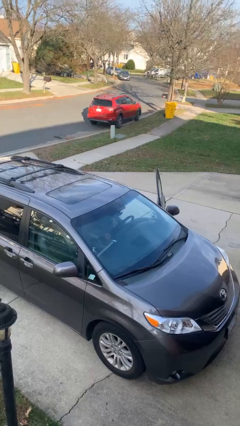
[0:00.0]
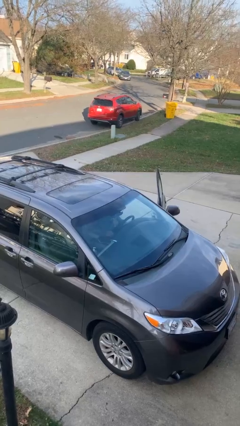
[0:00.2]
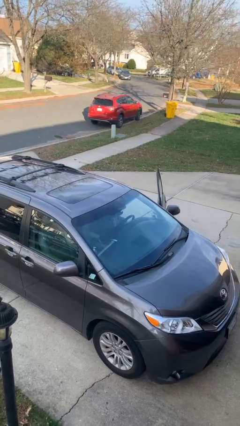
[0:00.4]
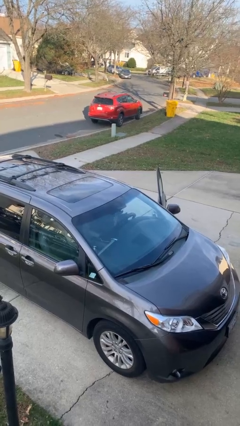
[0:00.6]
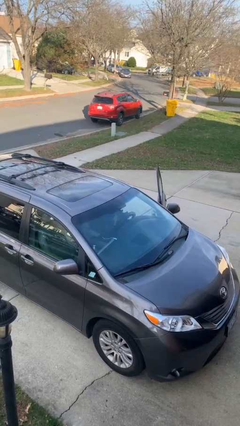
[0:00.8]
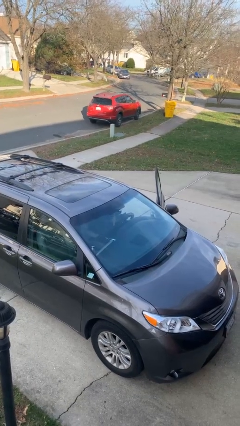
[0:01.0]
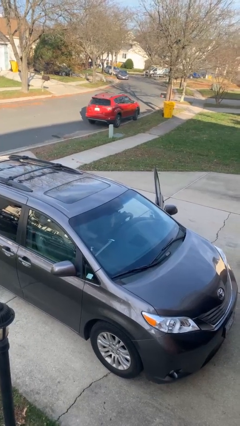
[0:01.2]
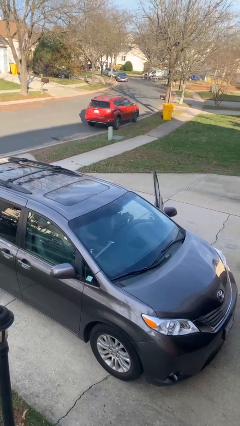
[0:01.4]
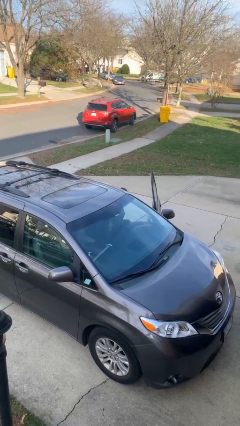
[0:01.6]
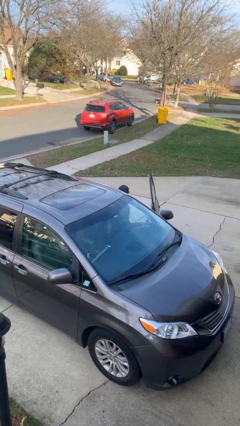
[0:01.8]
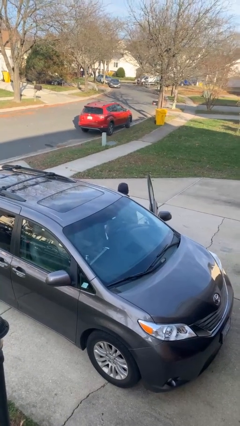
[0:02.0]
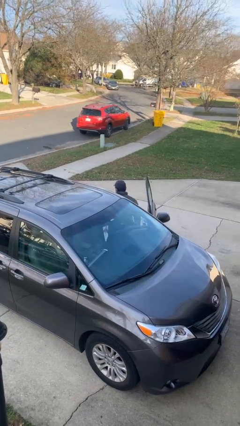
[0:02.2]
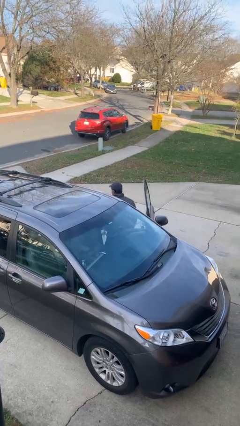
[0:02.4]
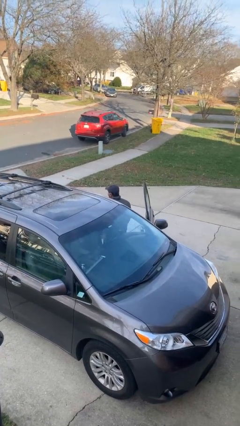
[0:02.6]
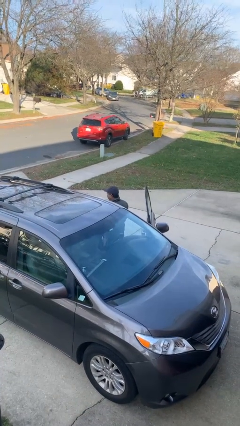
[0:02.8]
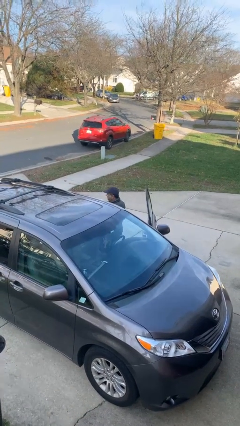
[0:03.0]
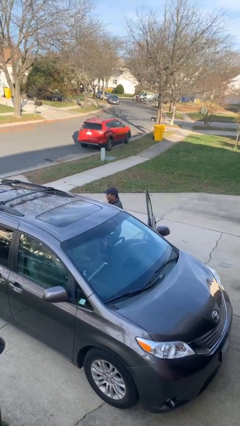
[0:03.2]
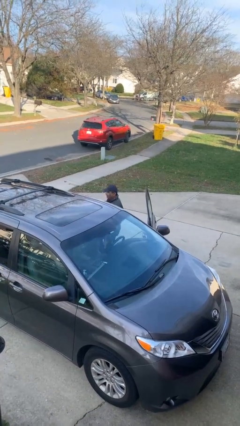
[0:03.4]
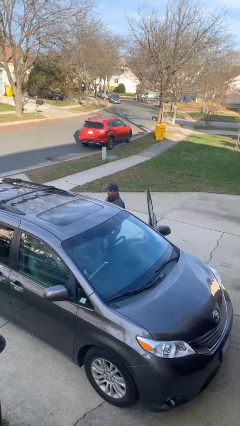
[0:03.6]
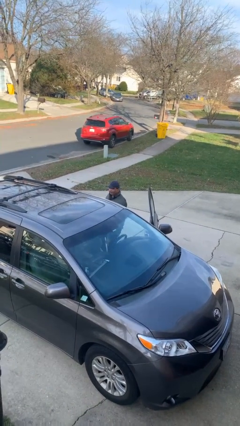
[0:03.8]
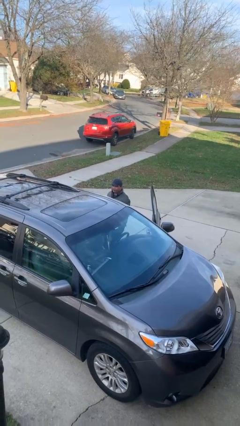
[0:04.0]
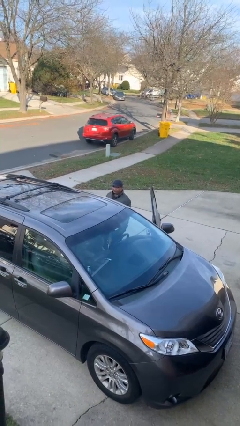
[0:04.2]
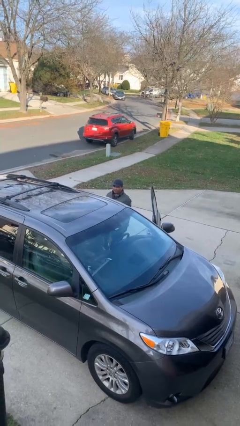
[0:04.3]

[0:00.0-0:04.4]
person exits car

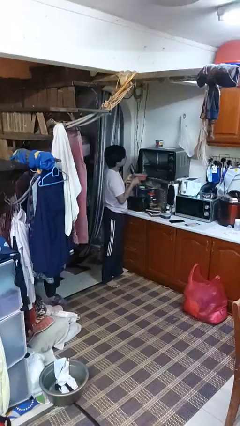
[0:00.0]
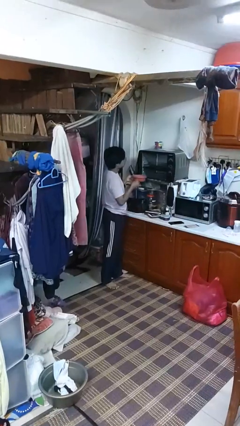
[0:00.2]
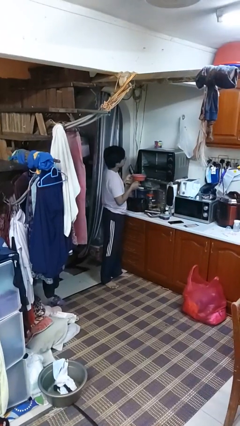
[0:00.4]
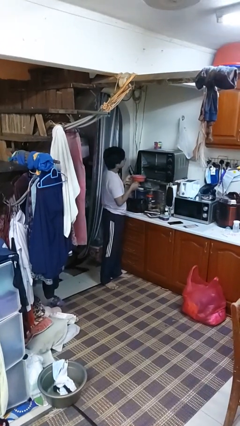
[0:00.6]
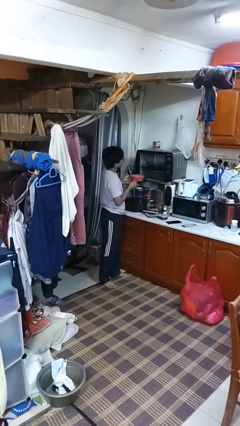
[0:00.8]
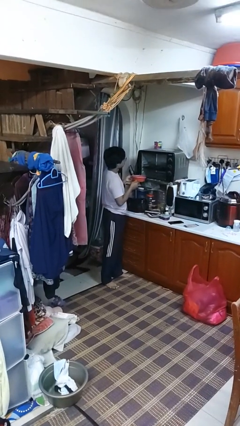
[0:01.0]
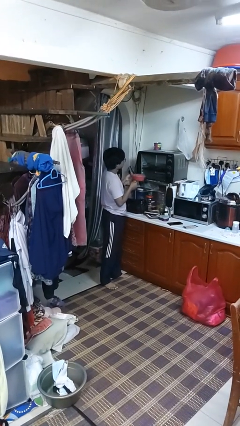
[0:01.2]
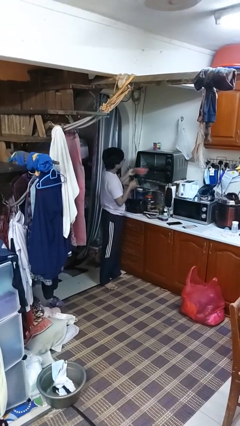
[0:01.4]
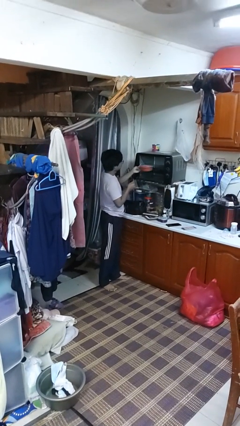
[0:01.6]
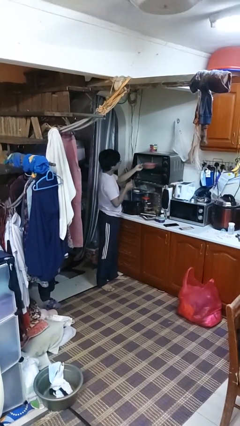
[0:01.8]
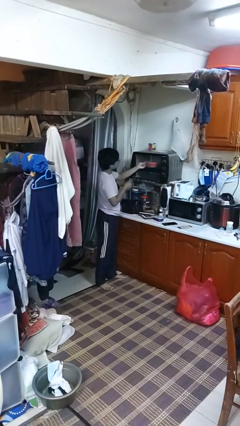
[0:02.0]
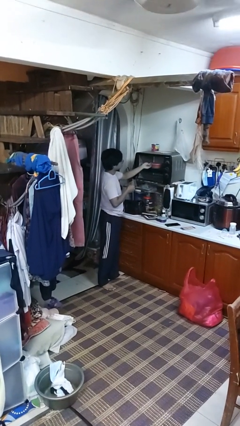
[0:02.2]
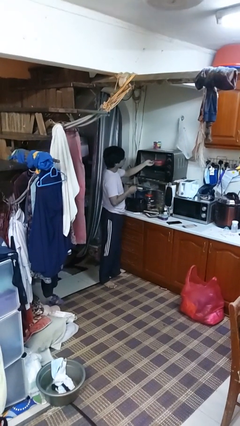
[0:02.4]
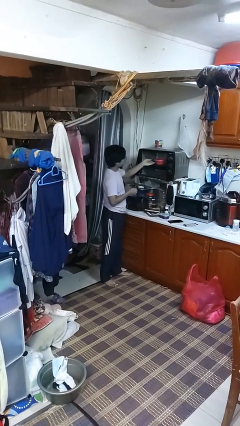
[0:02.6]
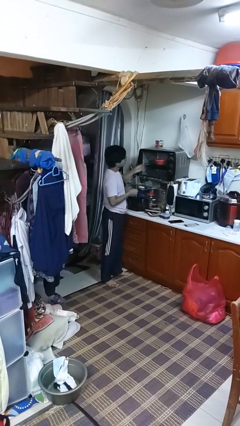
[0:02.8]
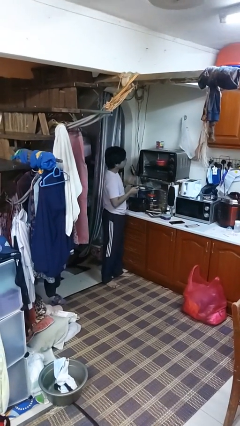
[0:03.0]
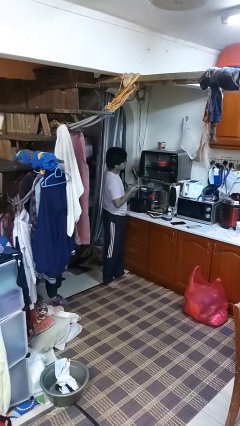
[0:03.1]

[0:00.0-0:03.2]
person puts object into oven

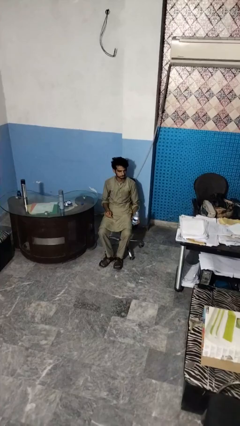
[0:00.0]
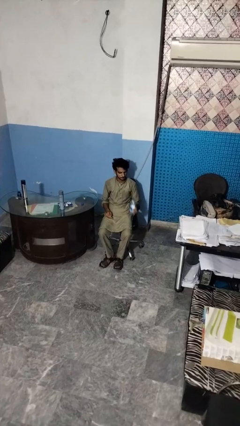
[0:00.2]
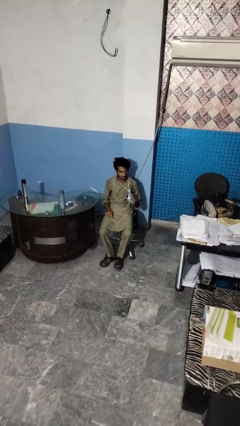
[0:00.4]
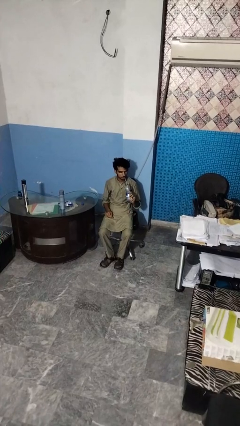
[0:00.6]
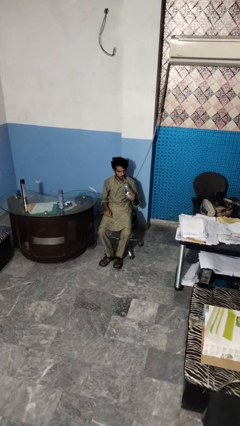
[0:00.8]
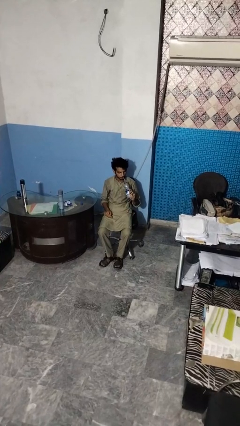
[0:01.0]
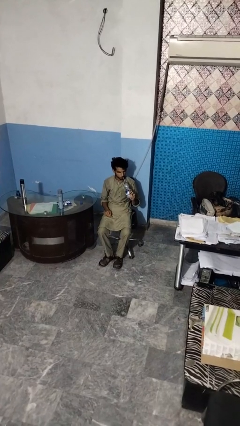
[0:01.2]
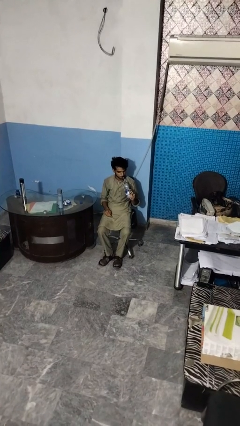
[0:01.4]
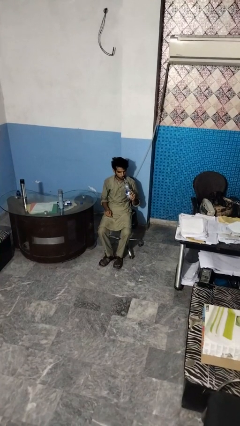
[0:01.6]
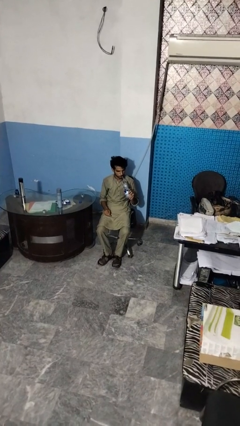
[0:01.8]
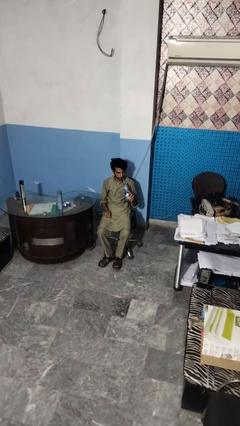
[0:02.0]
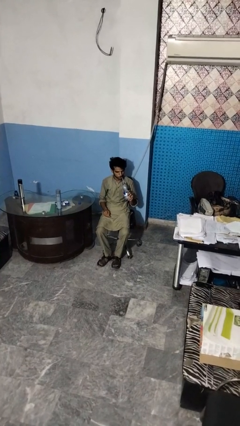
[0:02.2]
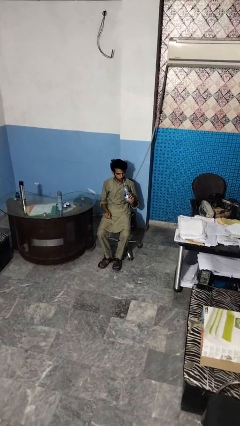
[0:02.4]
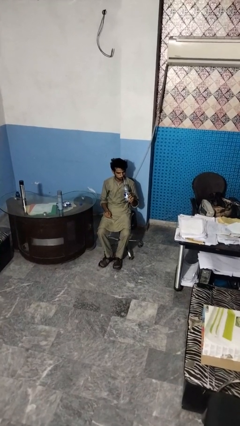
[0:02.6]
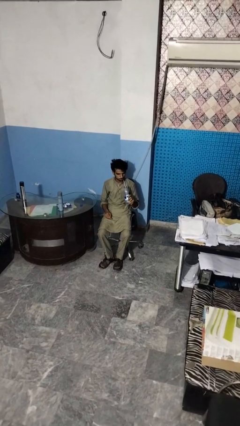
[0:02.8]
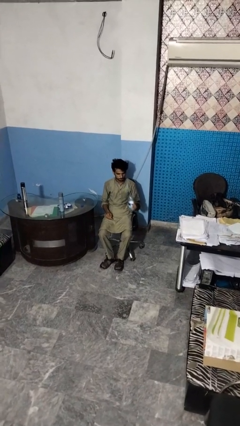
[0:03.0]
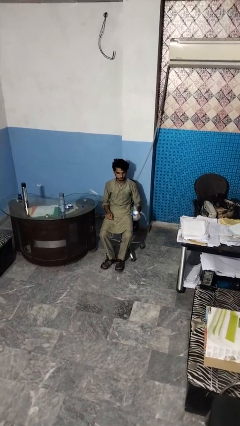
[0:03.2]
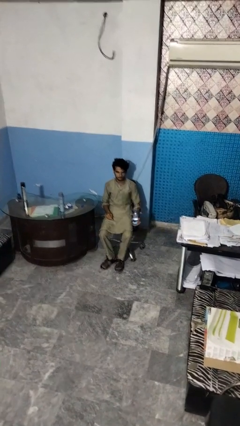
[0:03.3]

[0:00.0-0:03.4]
person drinks from straw

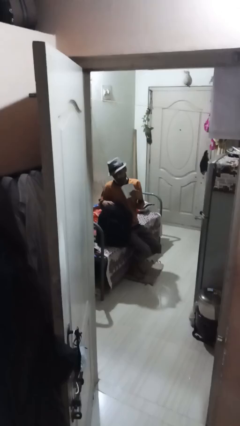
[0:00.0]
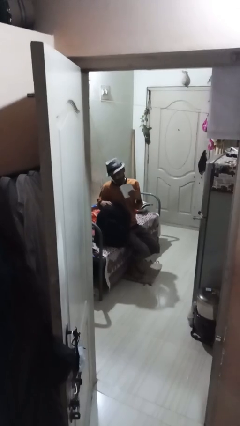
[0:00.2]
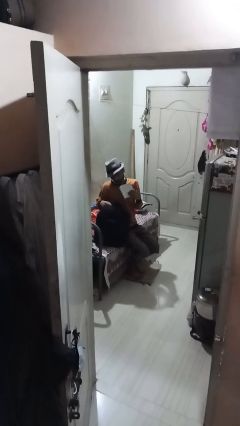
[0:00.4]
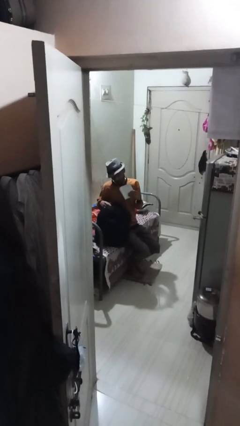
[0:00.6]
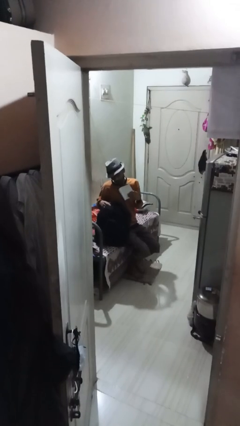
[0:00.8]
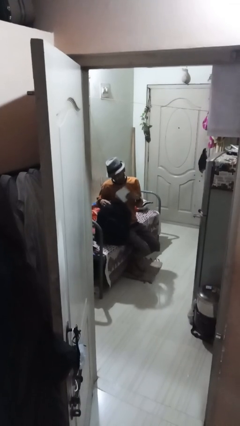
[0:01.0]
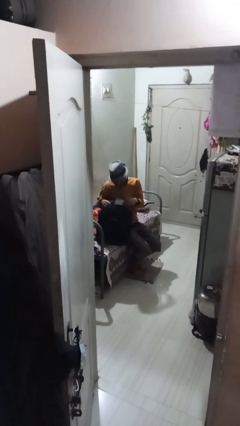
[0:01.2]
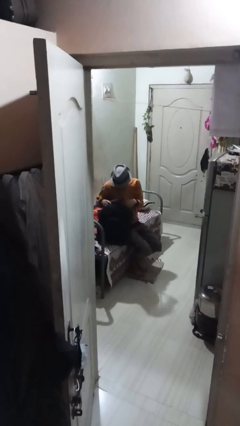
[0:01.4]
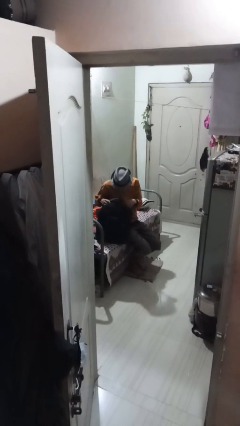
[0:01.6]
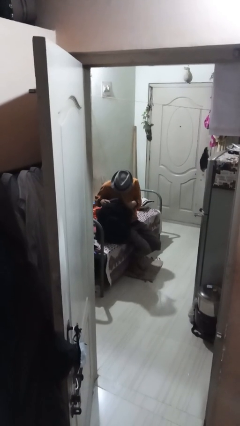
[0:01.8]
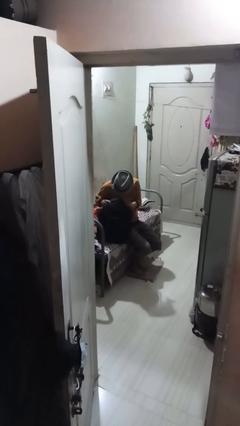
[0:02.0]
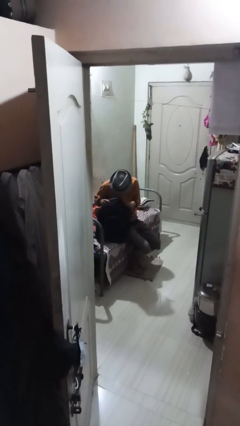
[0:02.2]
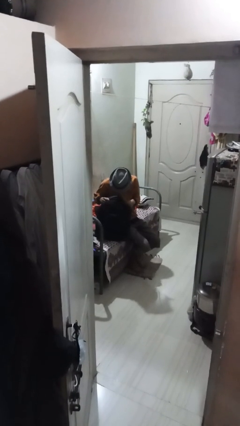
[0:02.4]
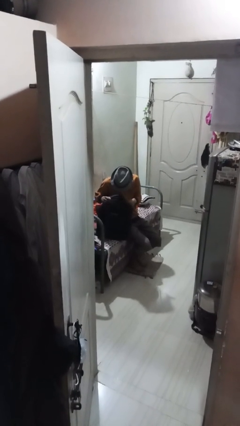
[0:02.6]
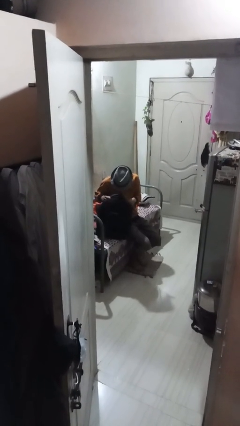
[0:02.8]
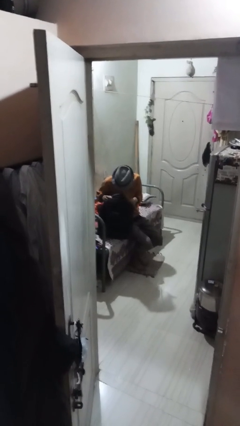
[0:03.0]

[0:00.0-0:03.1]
person puts object into backpack

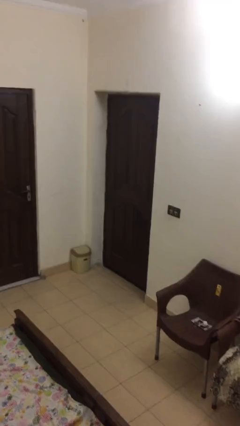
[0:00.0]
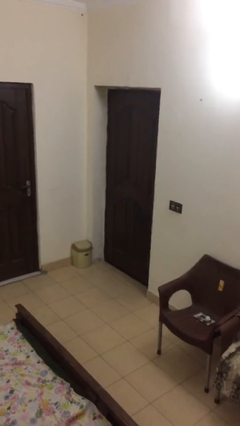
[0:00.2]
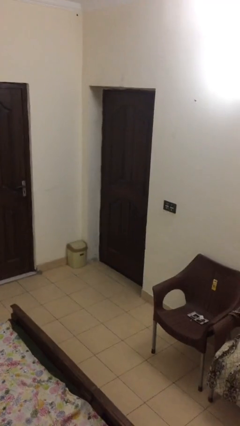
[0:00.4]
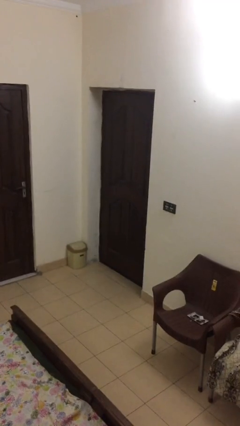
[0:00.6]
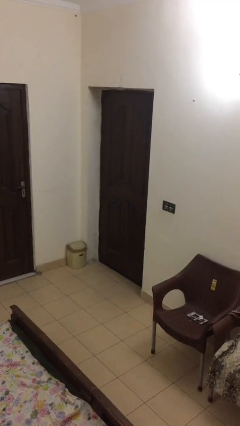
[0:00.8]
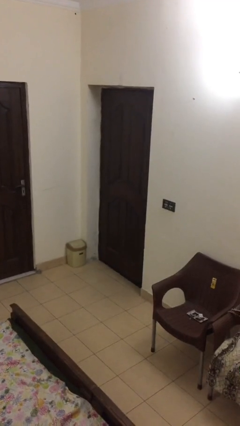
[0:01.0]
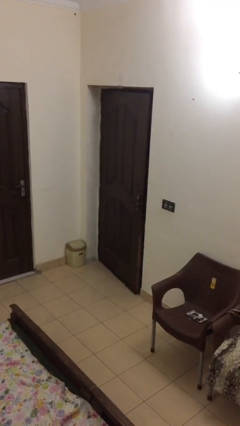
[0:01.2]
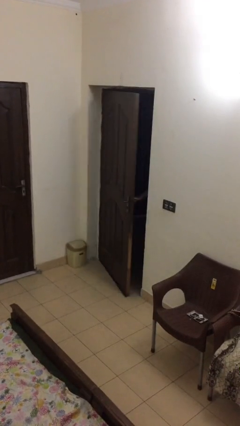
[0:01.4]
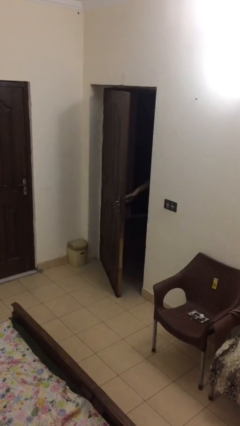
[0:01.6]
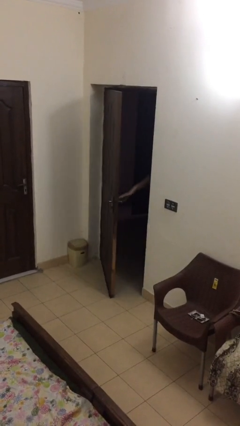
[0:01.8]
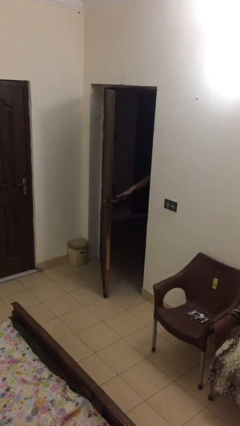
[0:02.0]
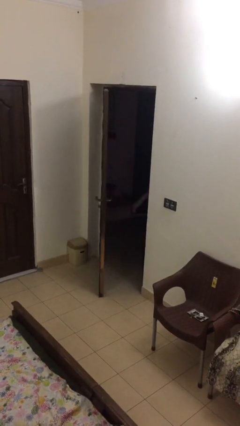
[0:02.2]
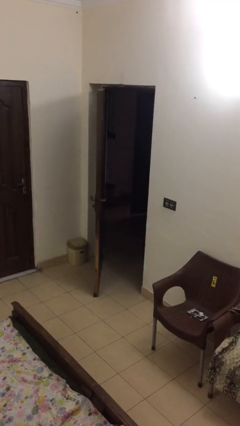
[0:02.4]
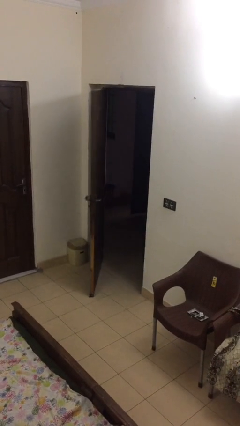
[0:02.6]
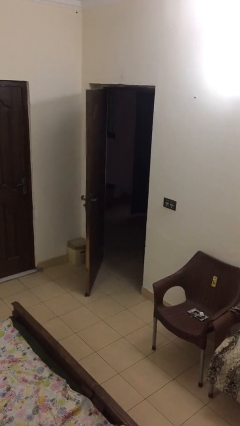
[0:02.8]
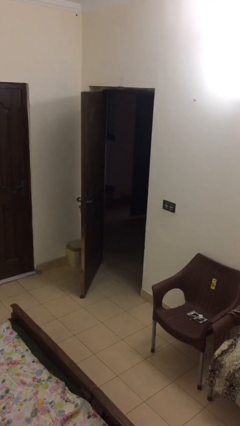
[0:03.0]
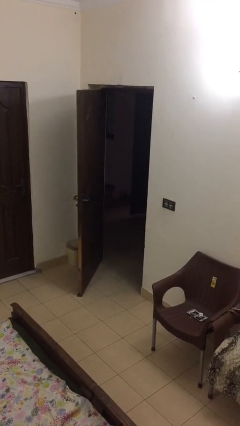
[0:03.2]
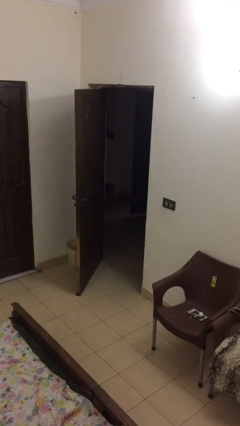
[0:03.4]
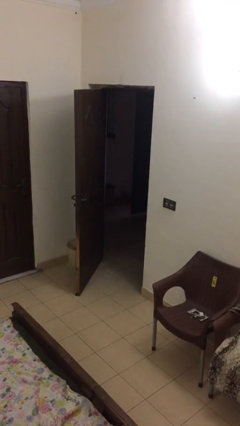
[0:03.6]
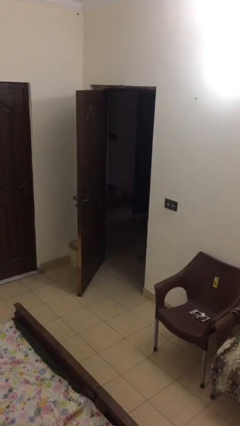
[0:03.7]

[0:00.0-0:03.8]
person opens facility door

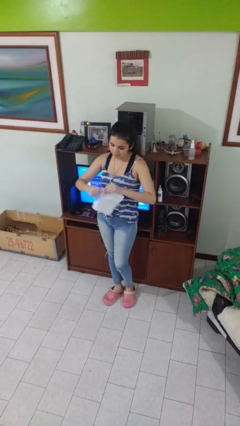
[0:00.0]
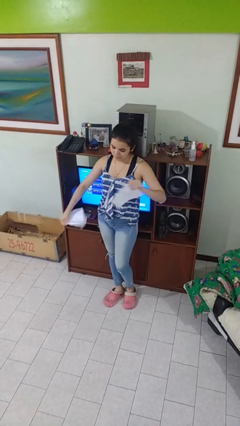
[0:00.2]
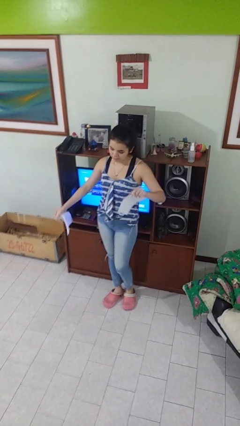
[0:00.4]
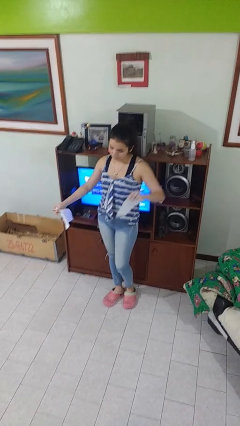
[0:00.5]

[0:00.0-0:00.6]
person tears paper
